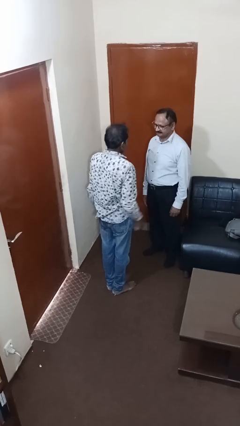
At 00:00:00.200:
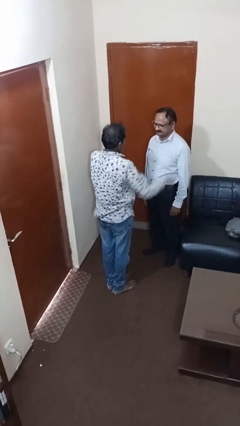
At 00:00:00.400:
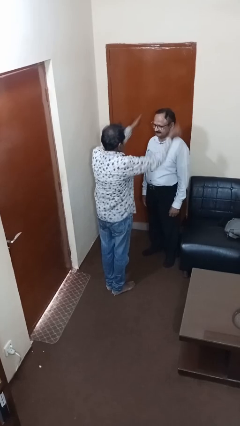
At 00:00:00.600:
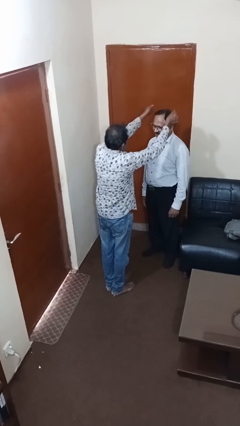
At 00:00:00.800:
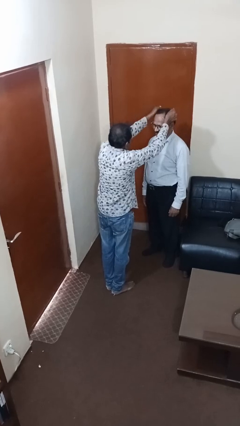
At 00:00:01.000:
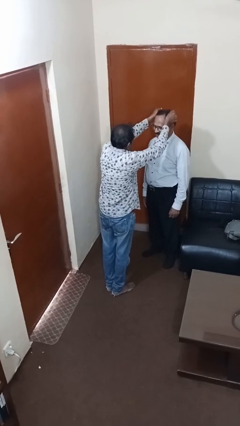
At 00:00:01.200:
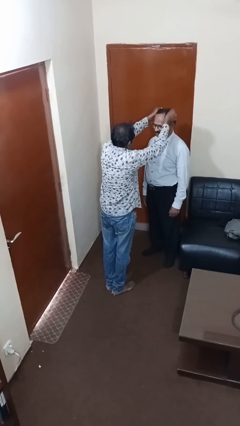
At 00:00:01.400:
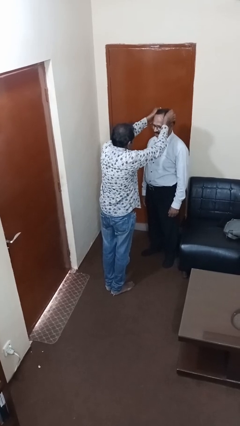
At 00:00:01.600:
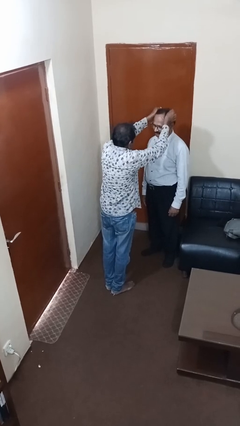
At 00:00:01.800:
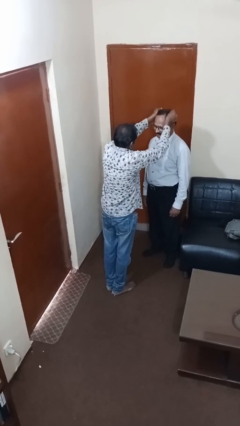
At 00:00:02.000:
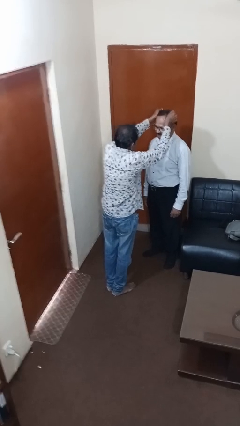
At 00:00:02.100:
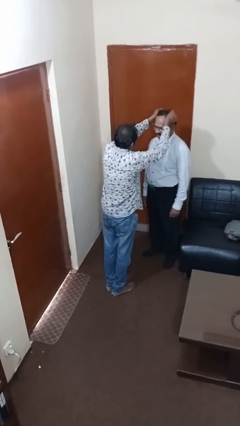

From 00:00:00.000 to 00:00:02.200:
person grabs person by hair

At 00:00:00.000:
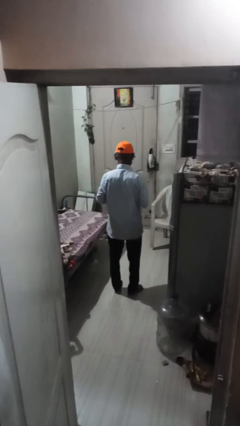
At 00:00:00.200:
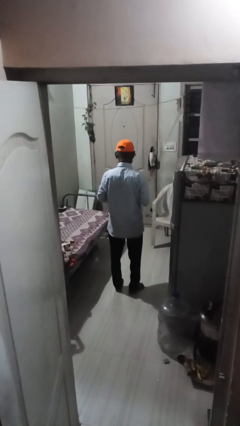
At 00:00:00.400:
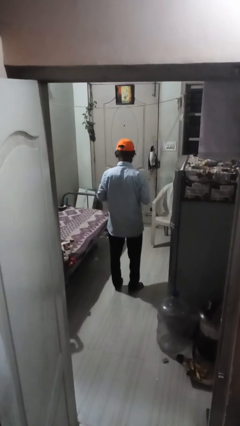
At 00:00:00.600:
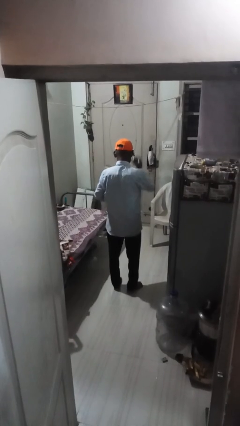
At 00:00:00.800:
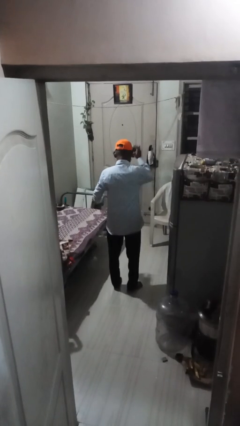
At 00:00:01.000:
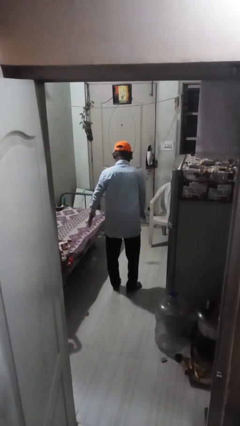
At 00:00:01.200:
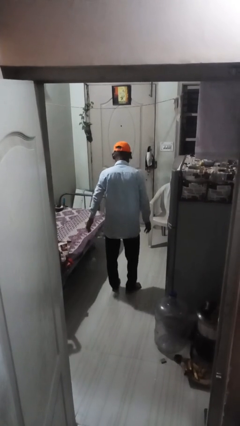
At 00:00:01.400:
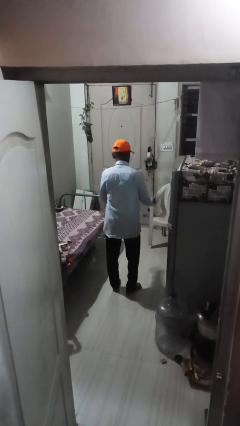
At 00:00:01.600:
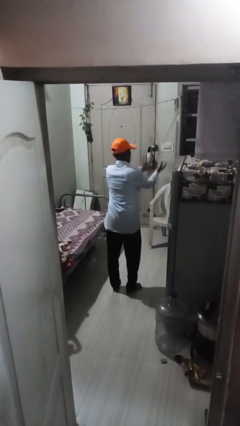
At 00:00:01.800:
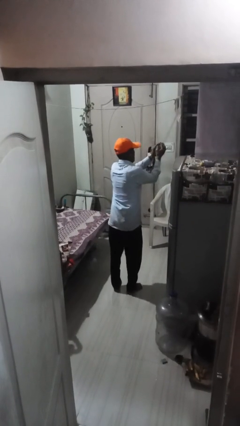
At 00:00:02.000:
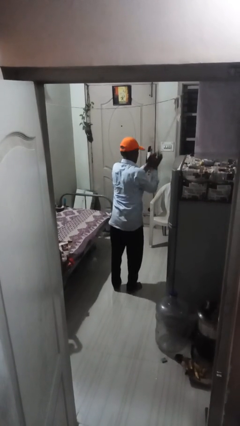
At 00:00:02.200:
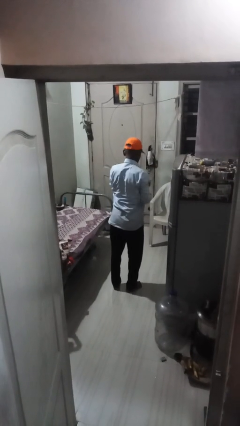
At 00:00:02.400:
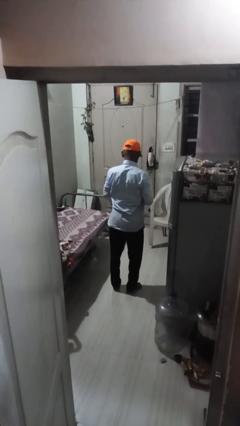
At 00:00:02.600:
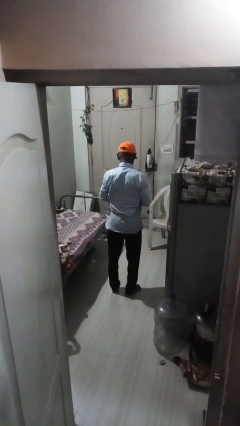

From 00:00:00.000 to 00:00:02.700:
person bounces ball on floor

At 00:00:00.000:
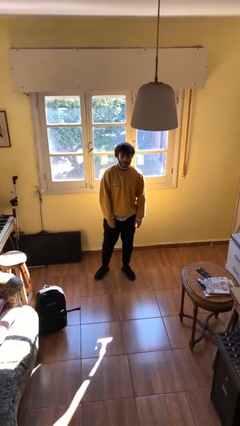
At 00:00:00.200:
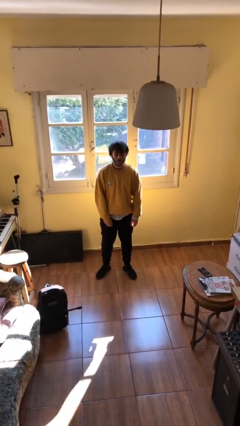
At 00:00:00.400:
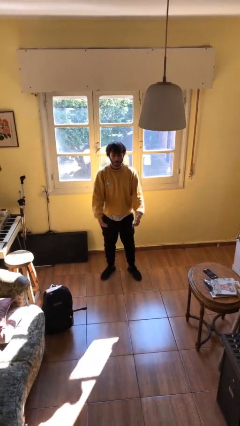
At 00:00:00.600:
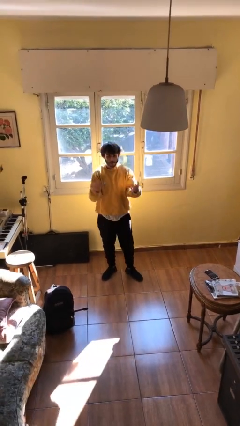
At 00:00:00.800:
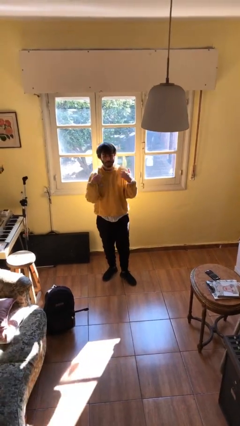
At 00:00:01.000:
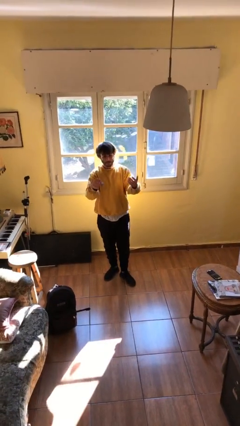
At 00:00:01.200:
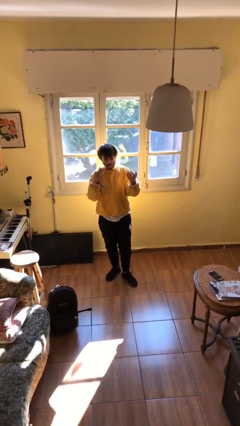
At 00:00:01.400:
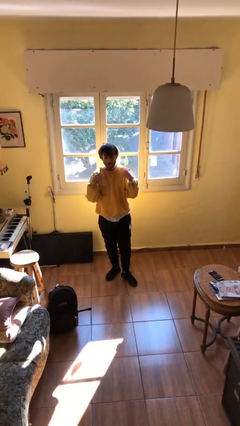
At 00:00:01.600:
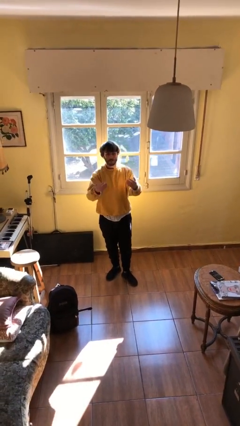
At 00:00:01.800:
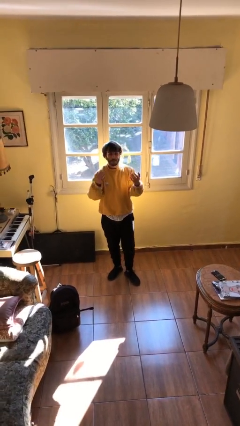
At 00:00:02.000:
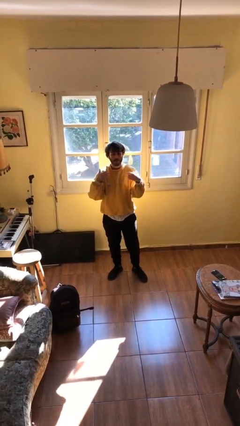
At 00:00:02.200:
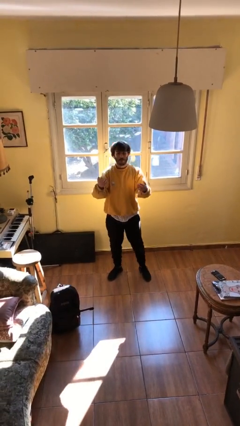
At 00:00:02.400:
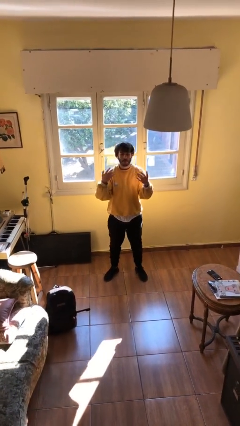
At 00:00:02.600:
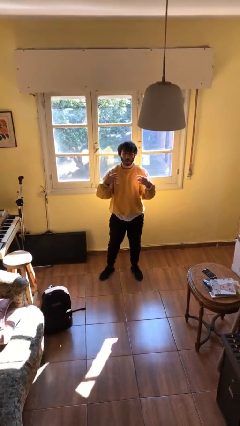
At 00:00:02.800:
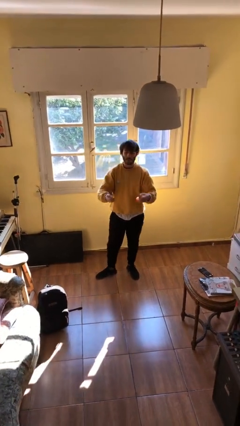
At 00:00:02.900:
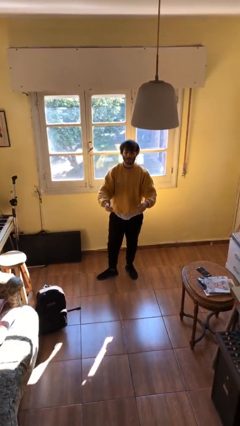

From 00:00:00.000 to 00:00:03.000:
person gestures come here

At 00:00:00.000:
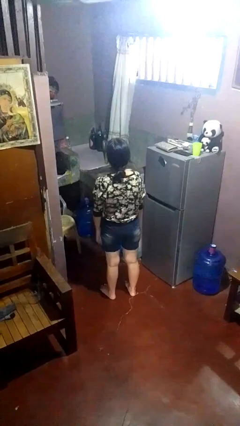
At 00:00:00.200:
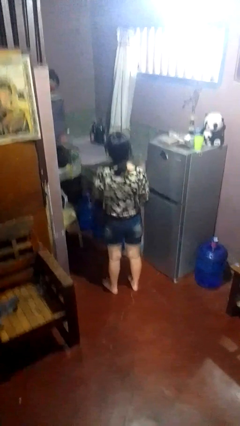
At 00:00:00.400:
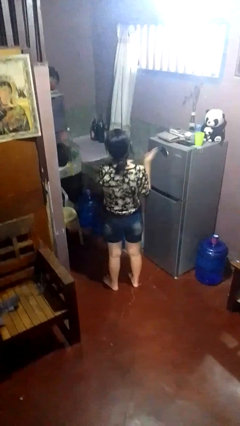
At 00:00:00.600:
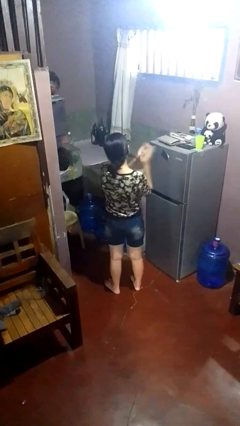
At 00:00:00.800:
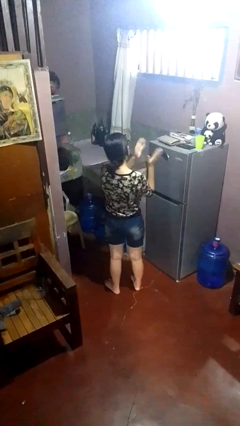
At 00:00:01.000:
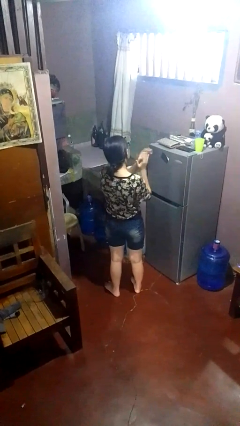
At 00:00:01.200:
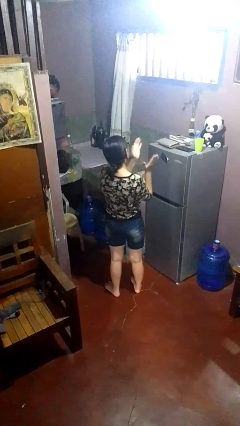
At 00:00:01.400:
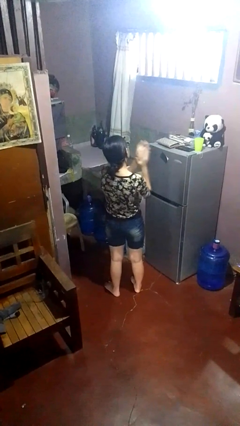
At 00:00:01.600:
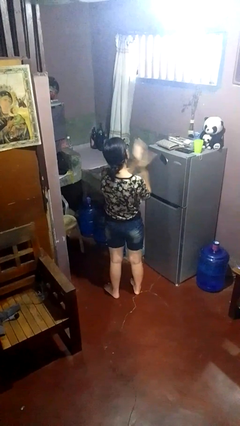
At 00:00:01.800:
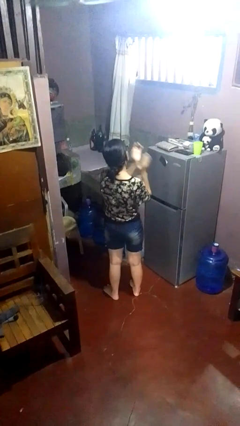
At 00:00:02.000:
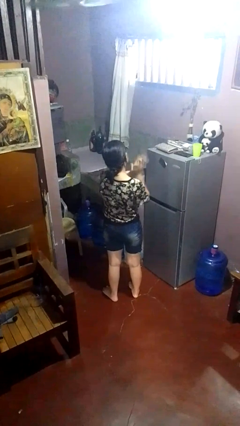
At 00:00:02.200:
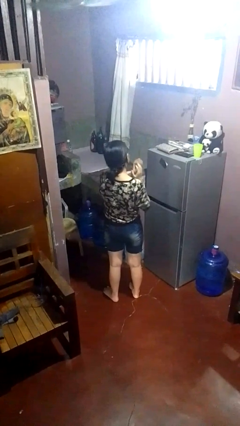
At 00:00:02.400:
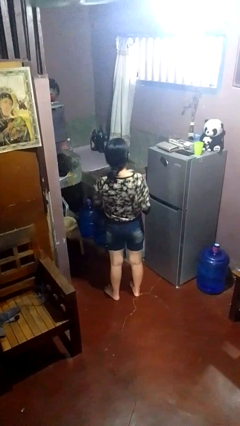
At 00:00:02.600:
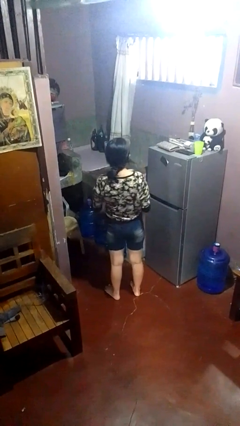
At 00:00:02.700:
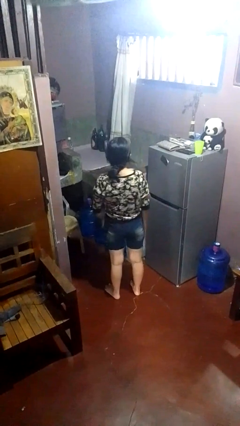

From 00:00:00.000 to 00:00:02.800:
person claps hands

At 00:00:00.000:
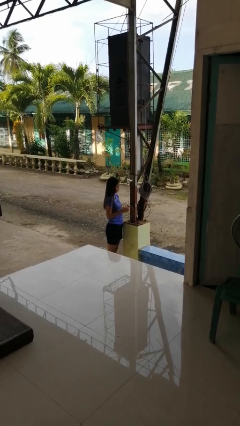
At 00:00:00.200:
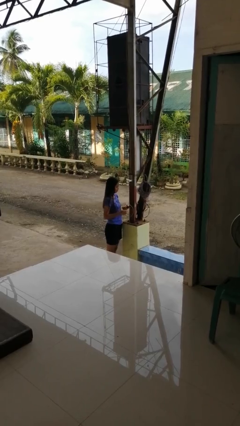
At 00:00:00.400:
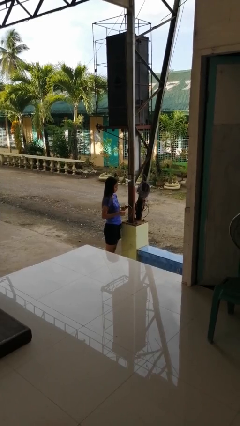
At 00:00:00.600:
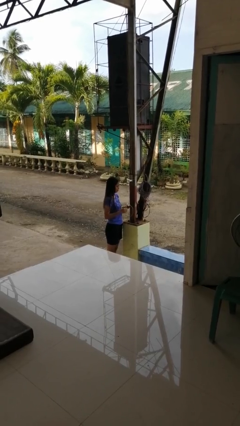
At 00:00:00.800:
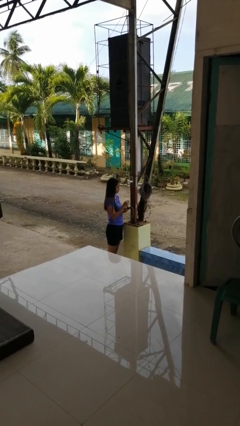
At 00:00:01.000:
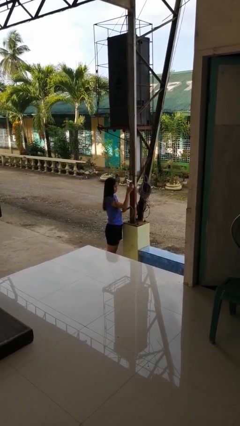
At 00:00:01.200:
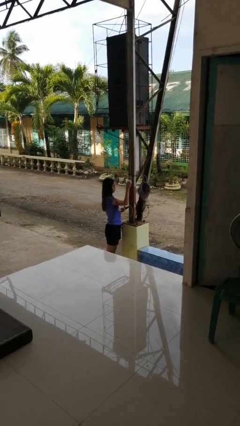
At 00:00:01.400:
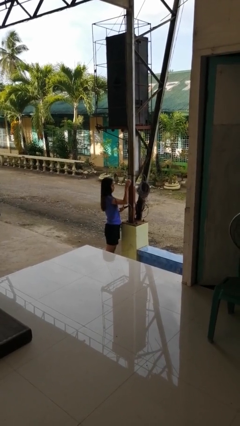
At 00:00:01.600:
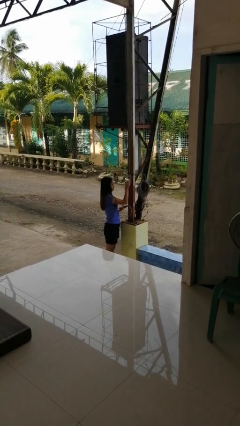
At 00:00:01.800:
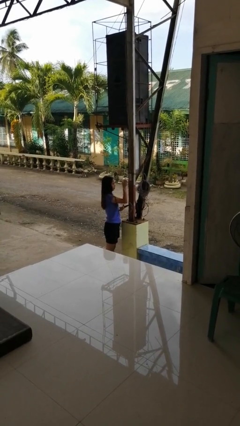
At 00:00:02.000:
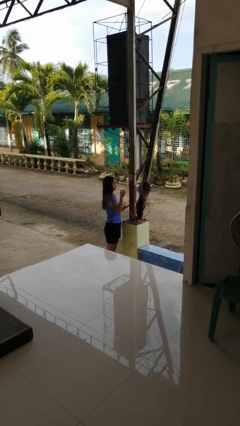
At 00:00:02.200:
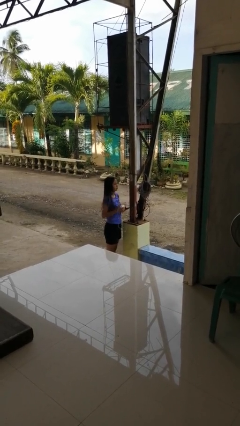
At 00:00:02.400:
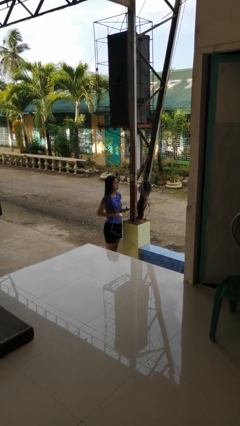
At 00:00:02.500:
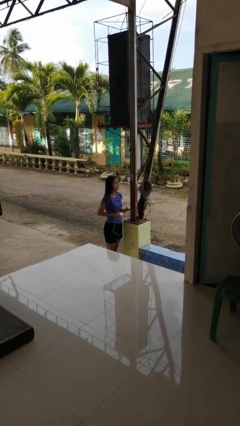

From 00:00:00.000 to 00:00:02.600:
person unplugs from electrical socket

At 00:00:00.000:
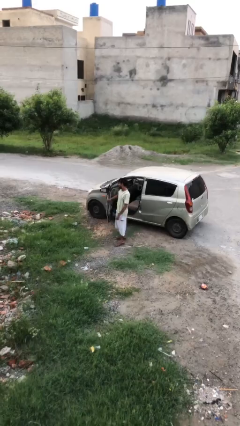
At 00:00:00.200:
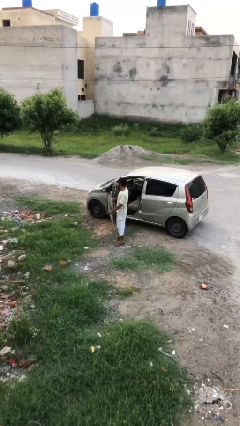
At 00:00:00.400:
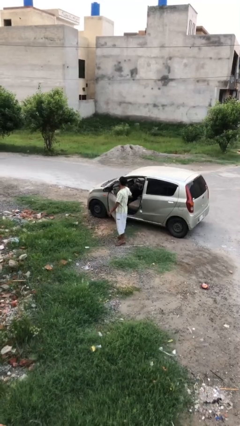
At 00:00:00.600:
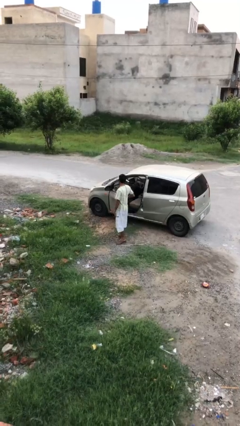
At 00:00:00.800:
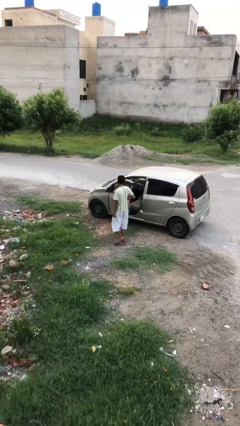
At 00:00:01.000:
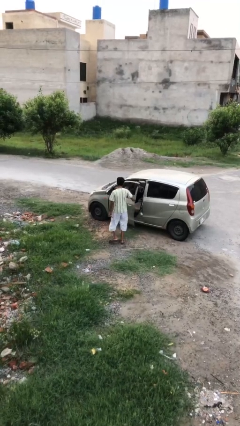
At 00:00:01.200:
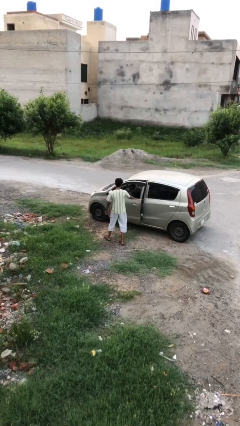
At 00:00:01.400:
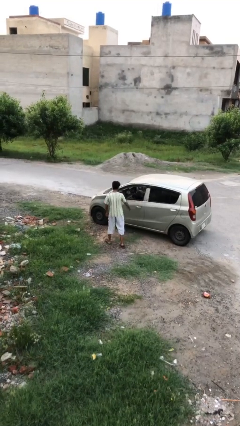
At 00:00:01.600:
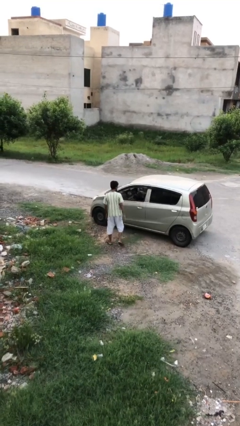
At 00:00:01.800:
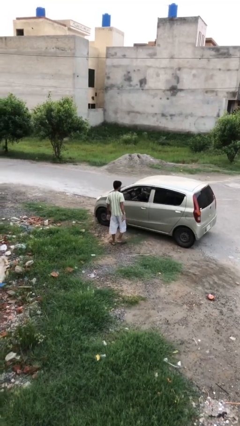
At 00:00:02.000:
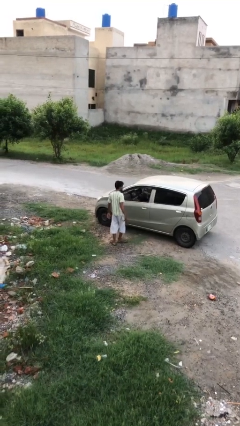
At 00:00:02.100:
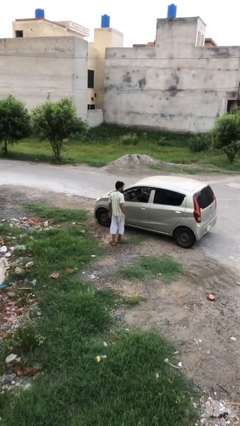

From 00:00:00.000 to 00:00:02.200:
person closes car door

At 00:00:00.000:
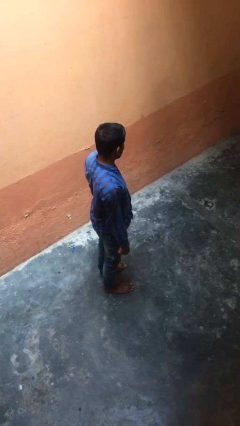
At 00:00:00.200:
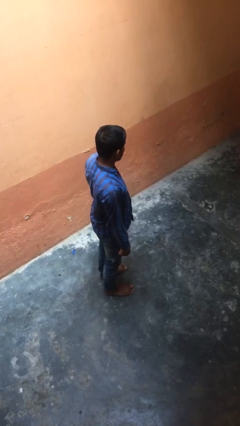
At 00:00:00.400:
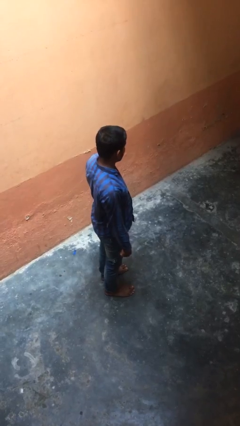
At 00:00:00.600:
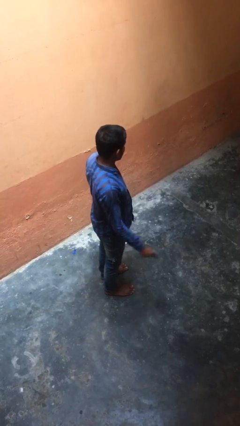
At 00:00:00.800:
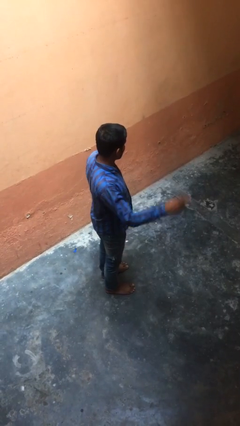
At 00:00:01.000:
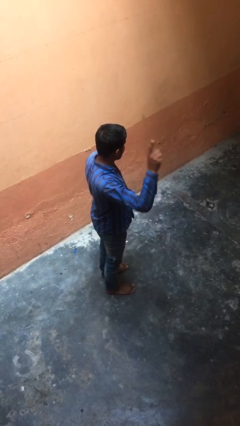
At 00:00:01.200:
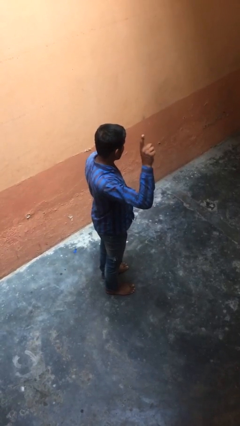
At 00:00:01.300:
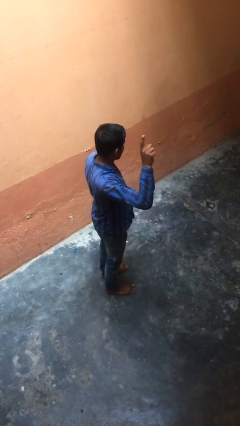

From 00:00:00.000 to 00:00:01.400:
person gestures number one
